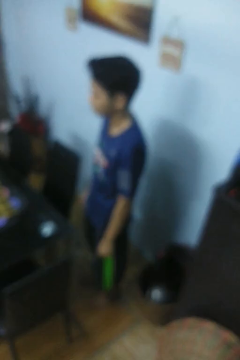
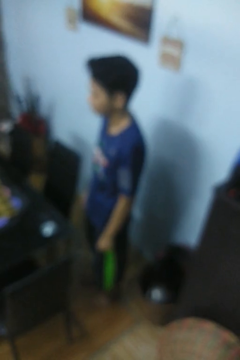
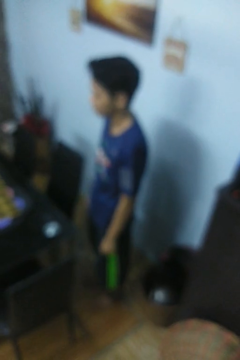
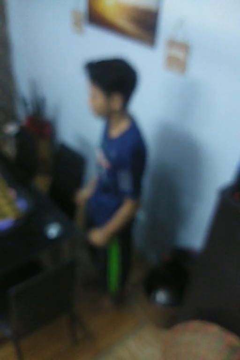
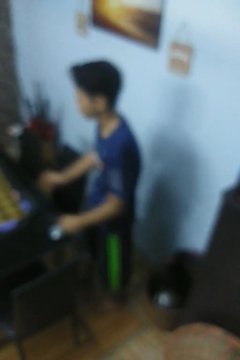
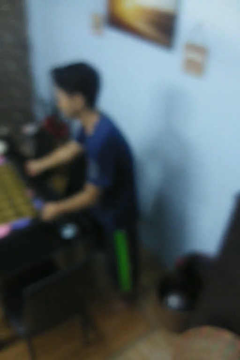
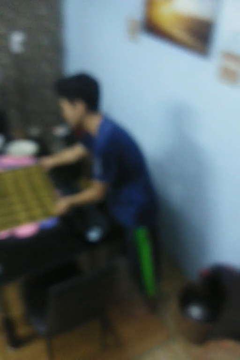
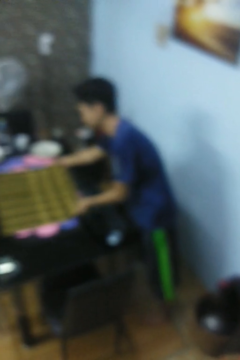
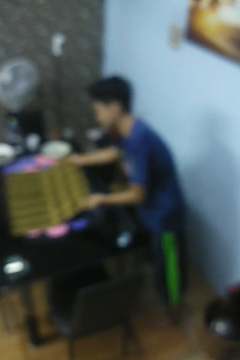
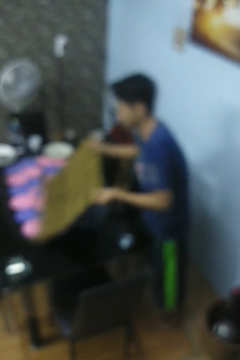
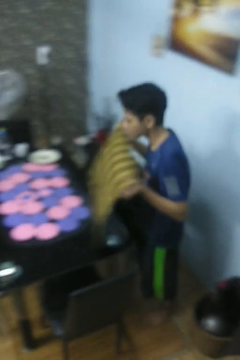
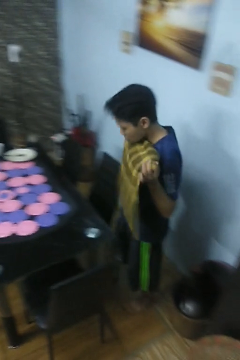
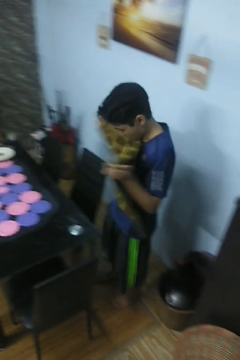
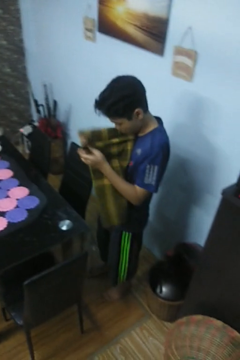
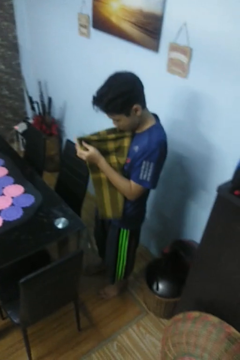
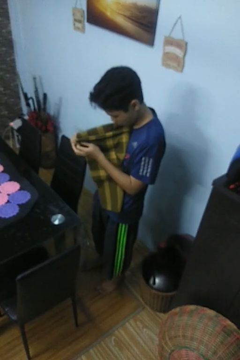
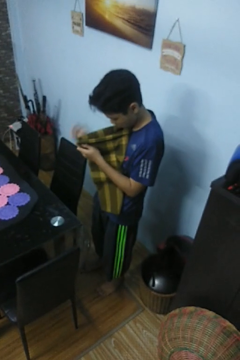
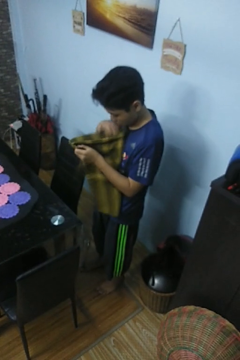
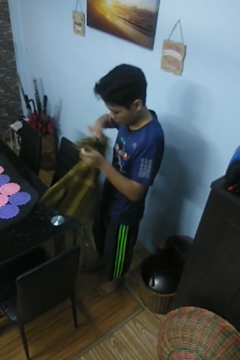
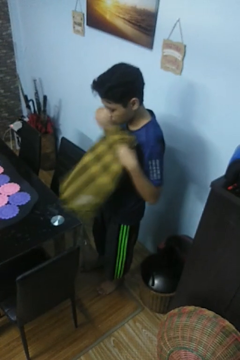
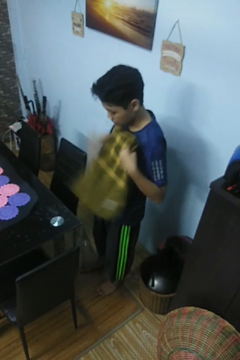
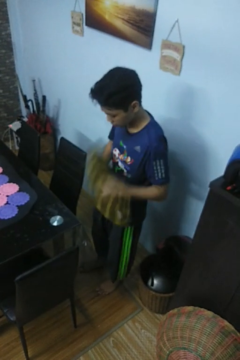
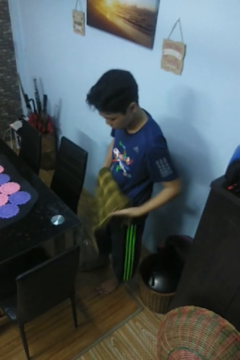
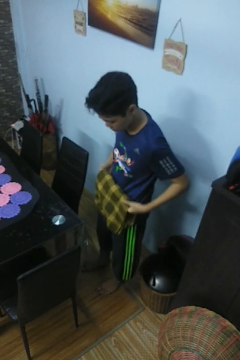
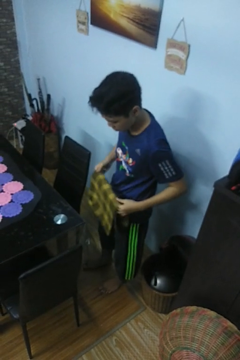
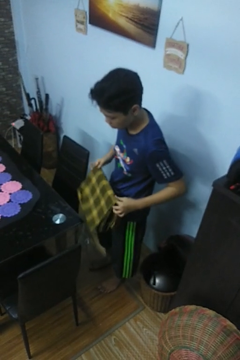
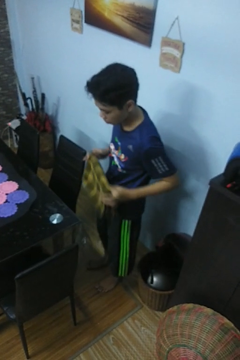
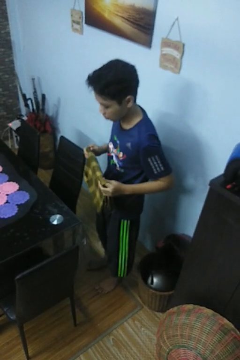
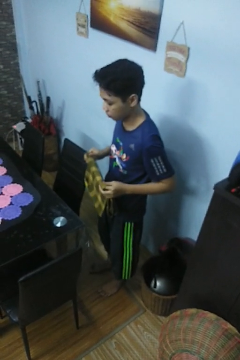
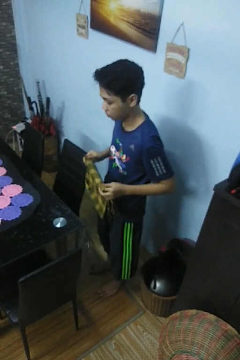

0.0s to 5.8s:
person folds tablecloth

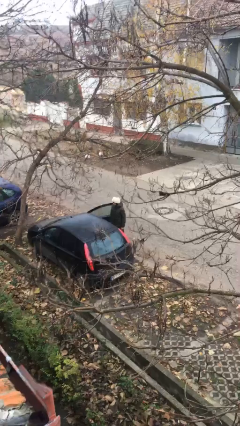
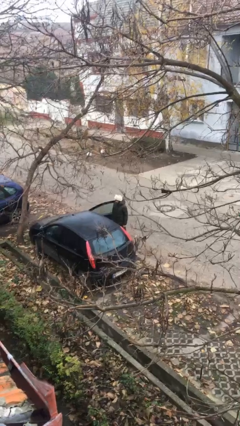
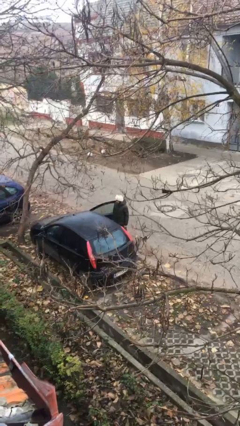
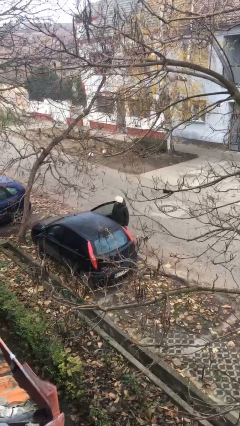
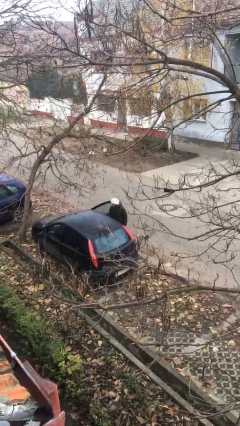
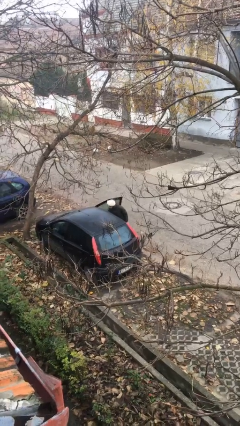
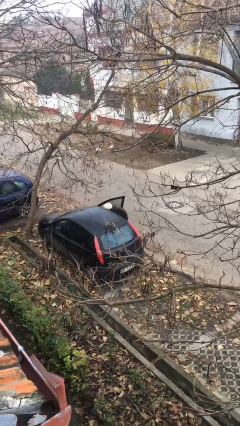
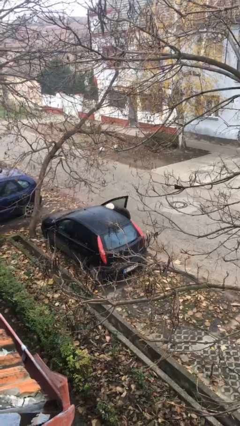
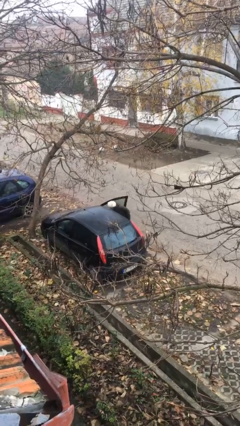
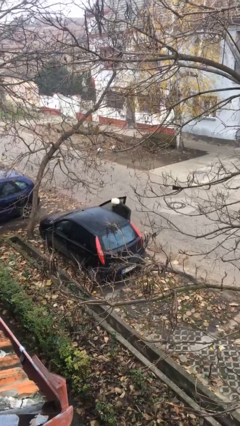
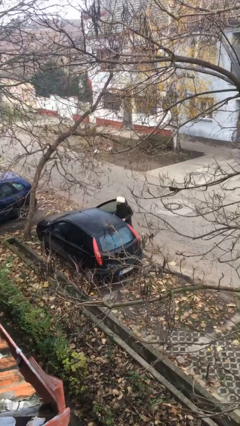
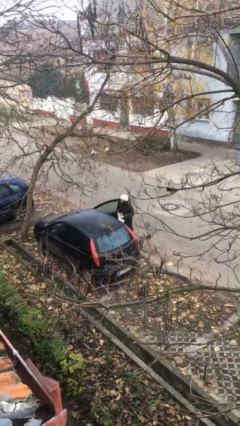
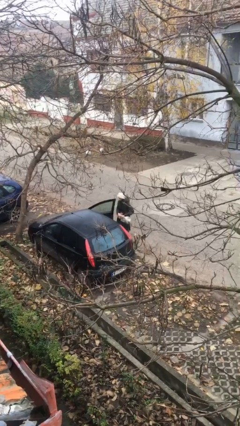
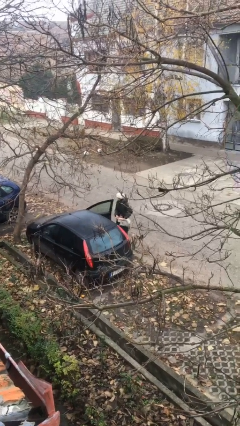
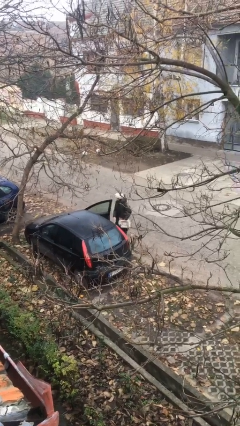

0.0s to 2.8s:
person unloads car

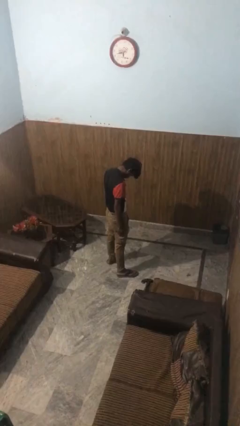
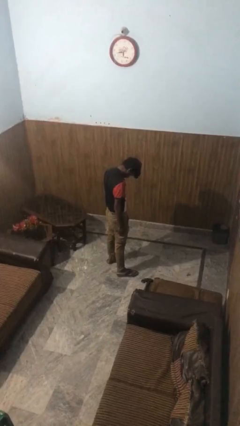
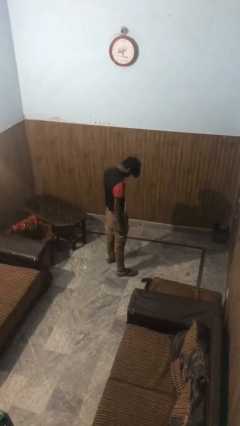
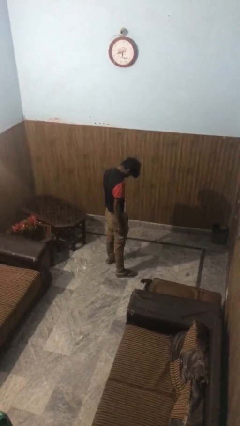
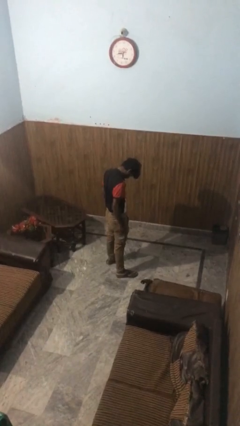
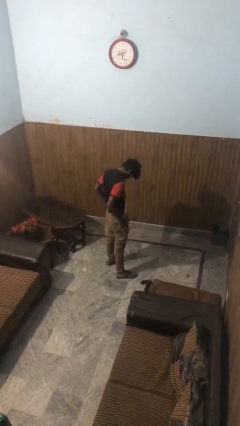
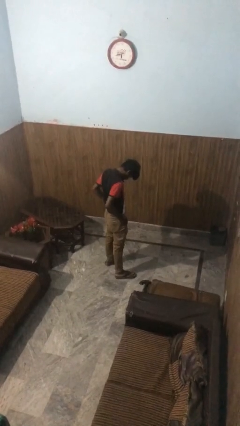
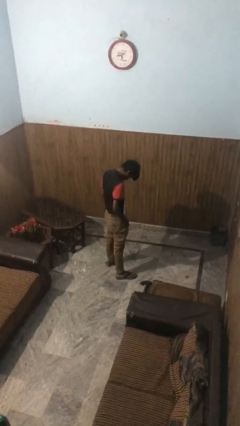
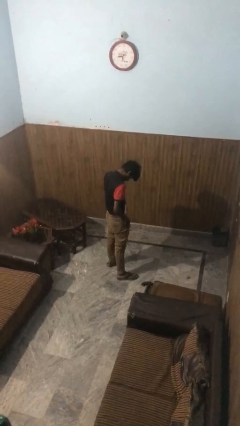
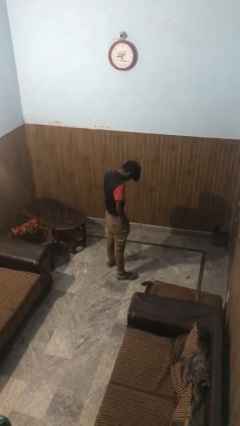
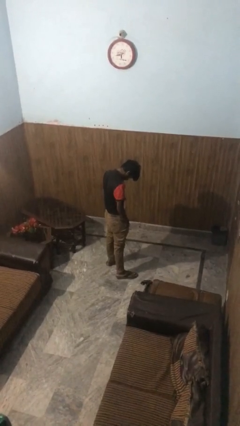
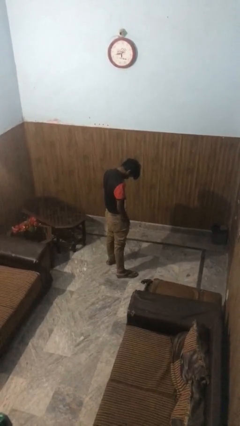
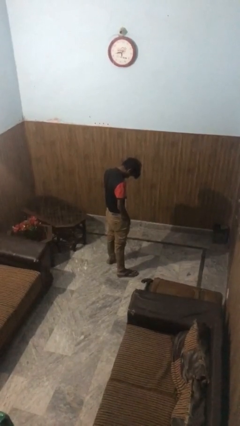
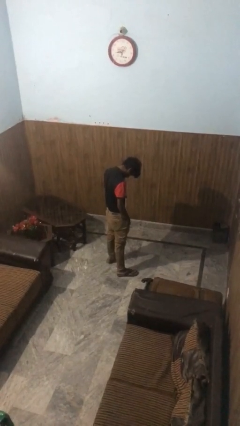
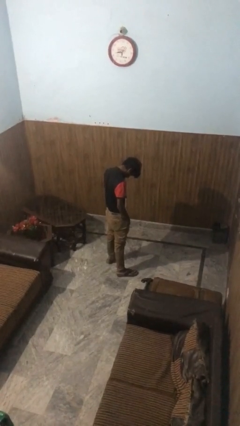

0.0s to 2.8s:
person puts hands in back pockets

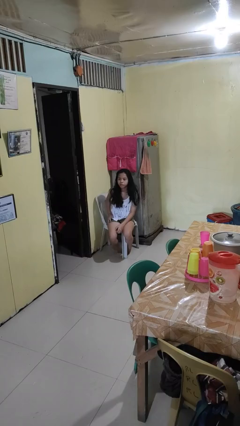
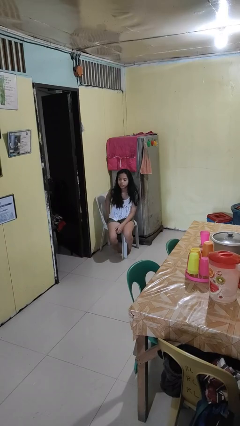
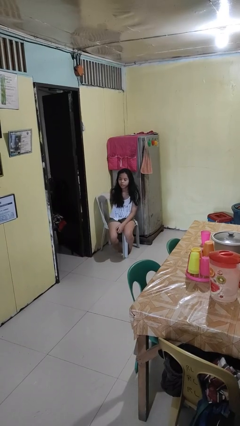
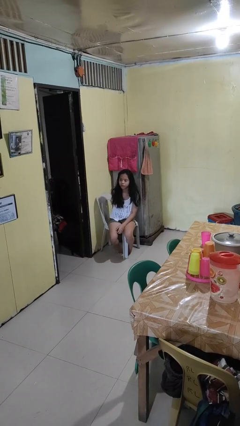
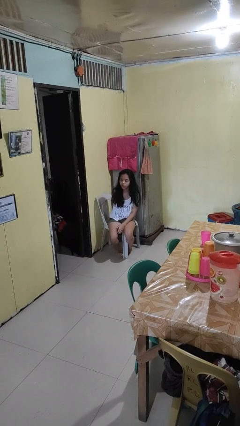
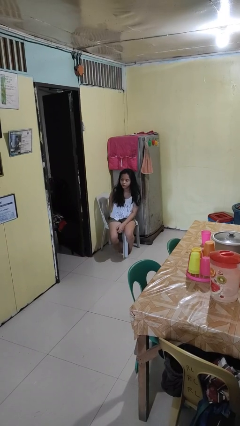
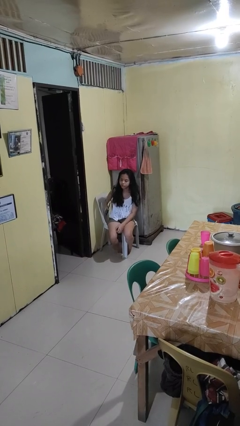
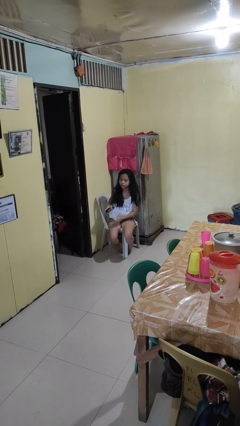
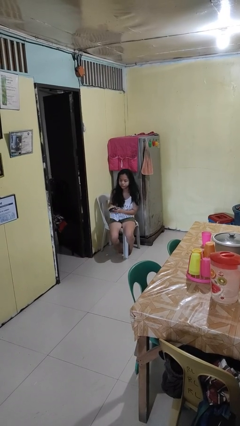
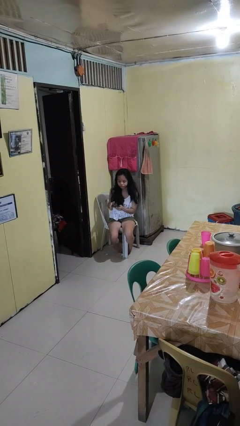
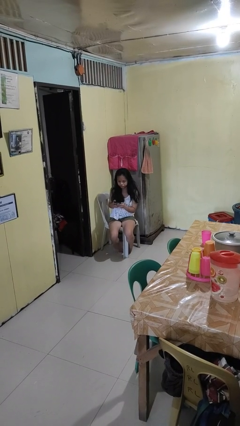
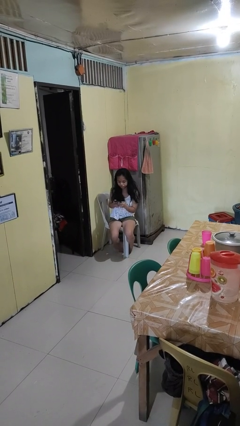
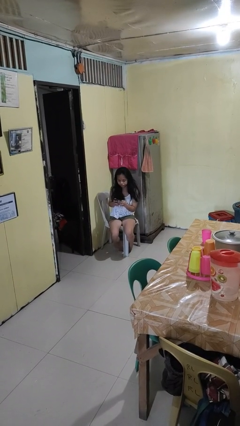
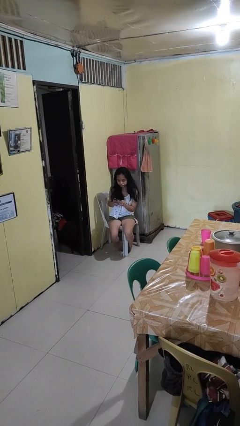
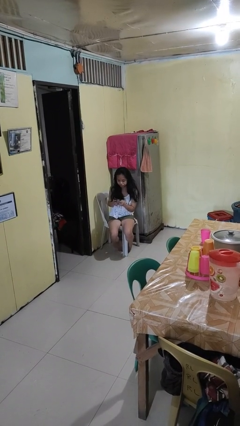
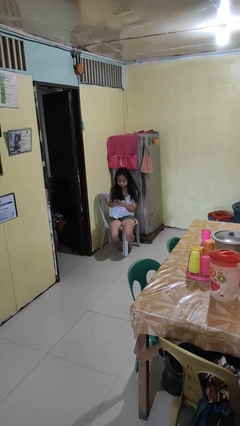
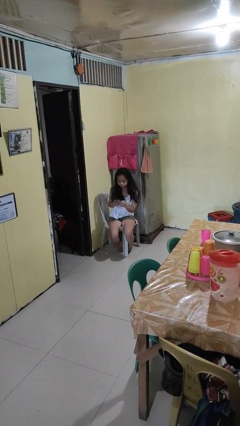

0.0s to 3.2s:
person takes phone from pocket

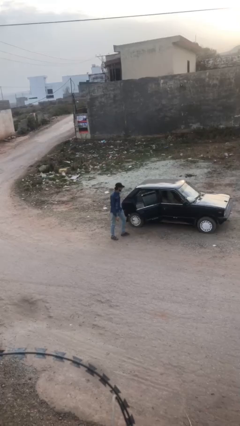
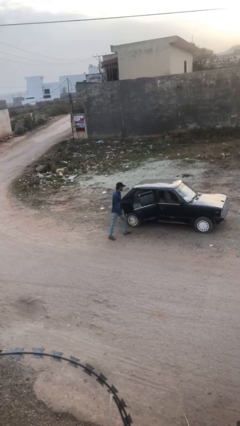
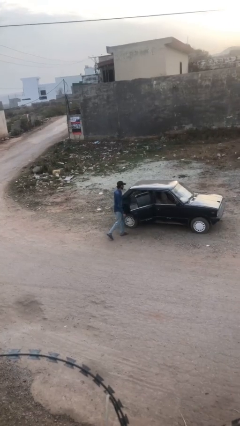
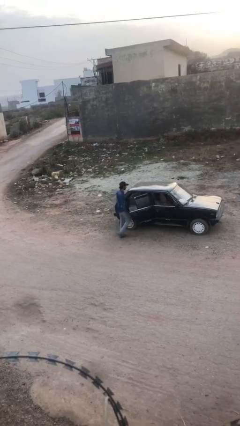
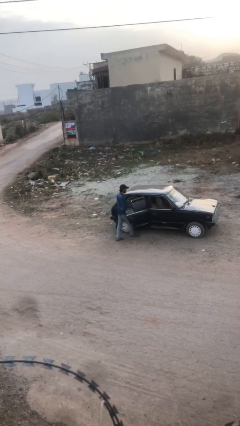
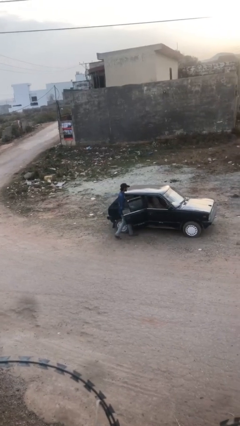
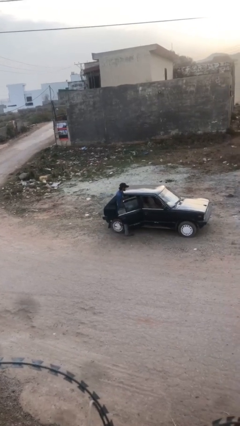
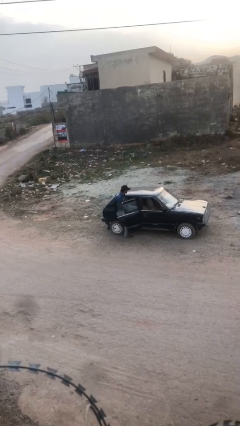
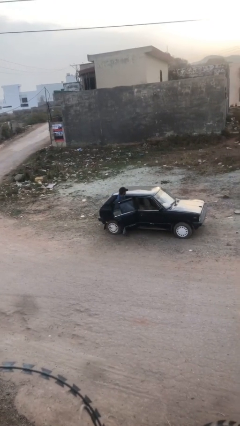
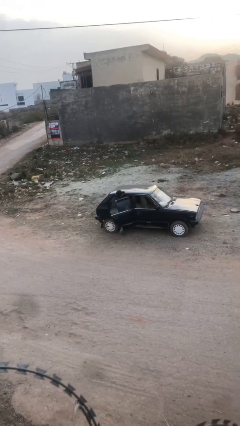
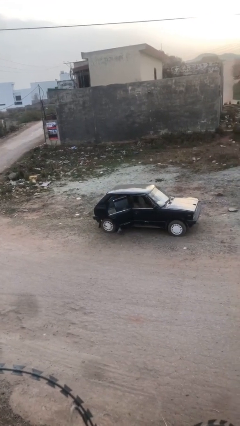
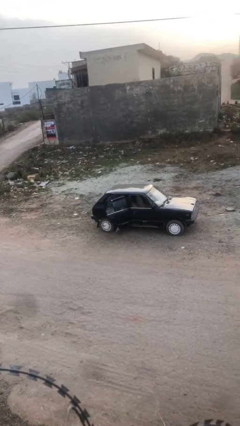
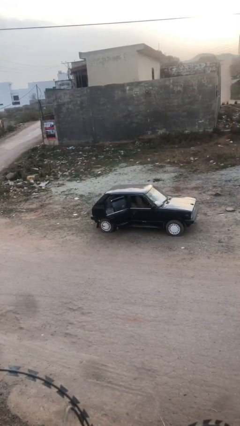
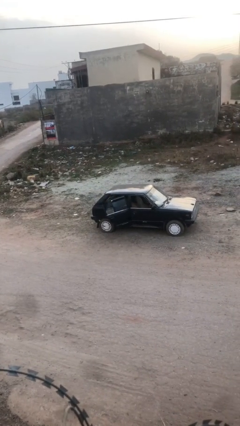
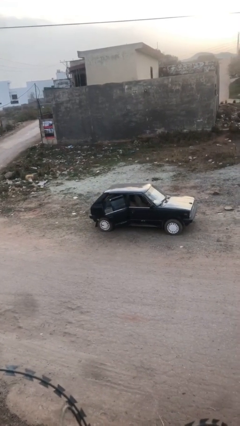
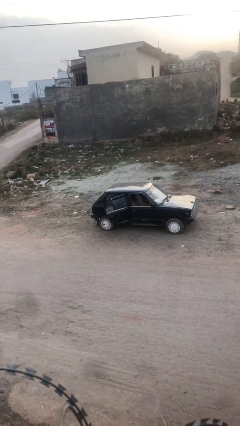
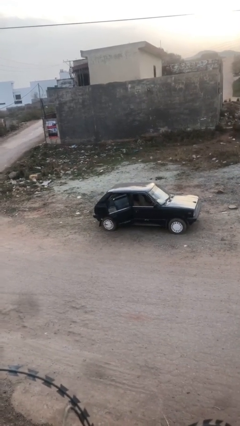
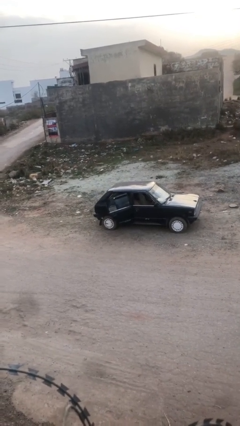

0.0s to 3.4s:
person enters car

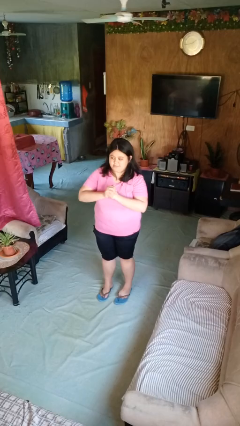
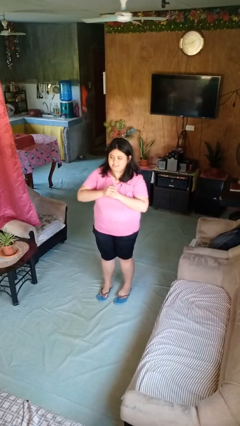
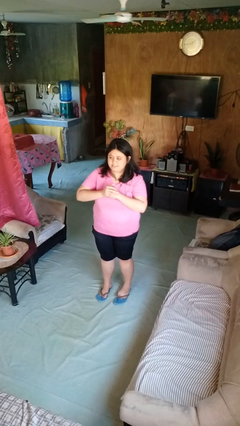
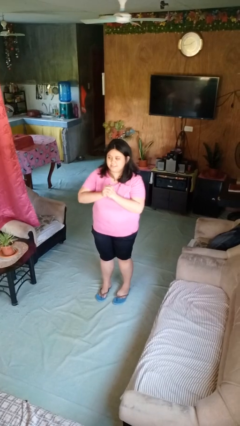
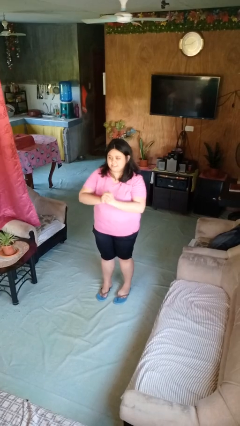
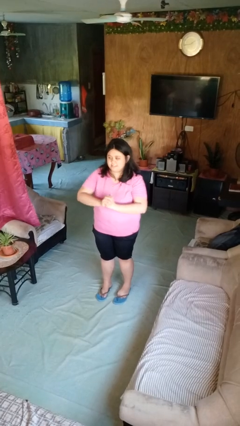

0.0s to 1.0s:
person cracks knuckles
